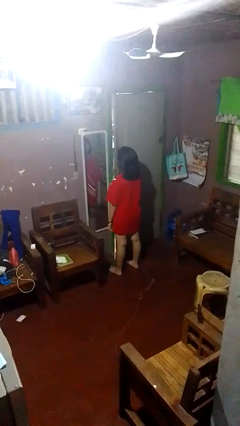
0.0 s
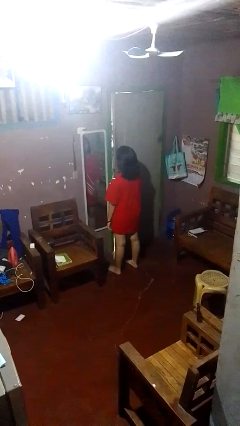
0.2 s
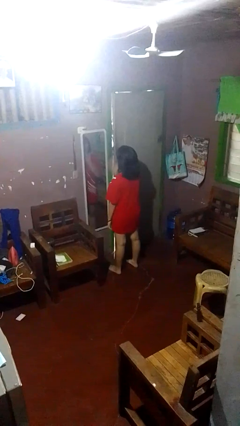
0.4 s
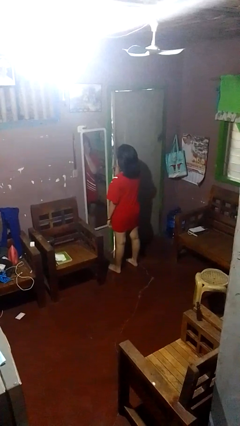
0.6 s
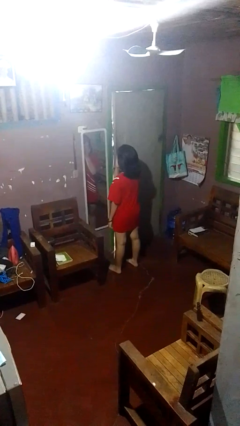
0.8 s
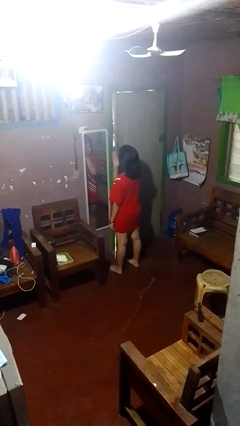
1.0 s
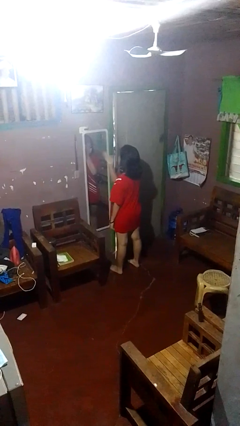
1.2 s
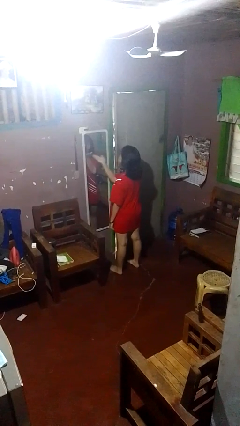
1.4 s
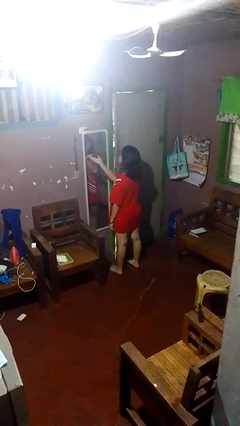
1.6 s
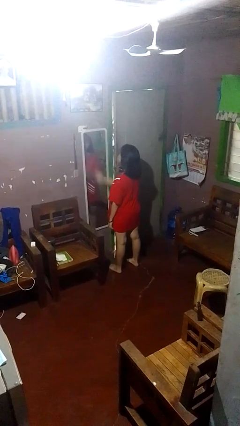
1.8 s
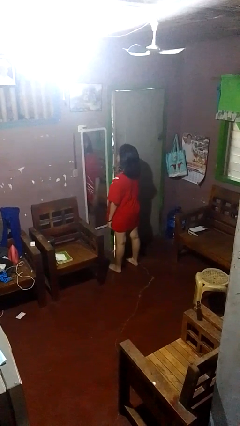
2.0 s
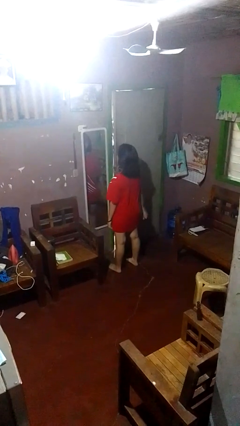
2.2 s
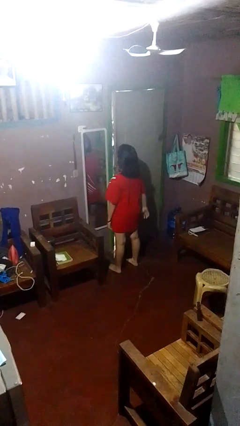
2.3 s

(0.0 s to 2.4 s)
person gestures blow kiss

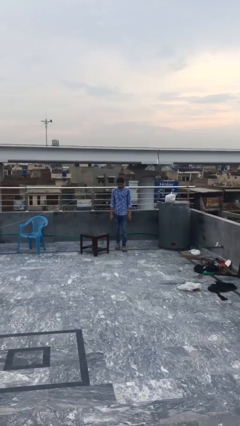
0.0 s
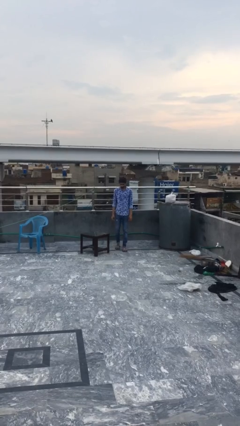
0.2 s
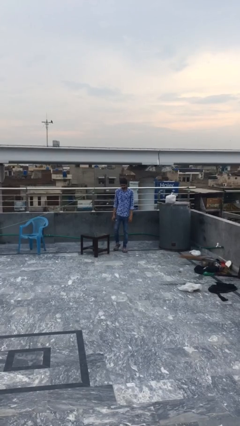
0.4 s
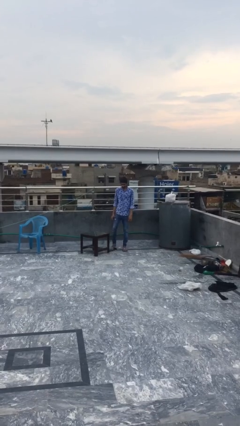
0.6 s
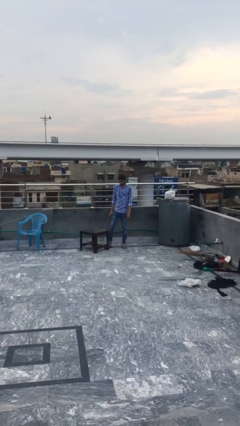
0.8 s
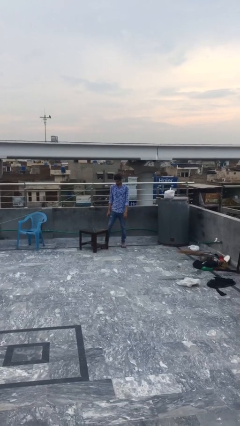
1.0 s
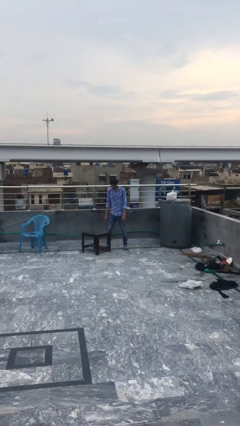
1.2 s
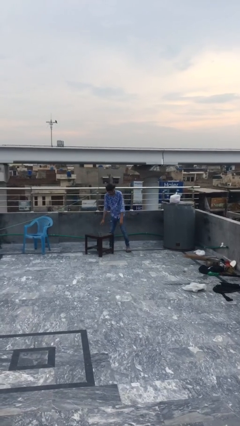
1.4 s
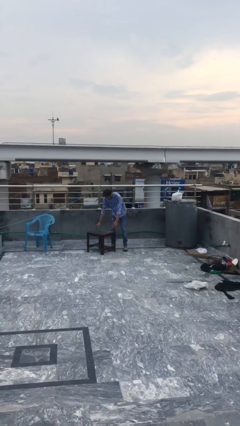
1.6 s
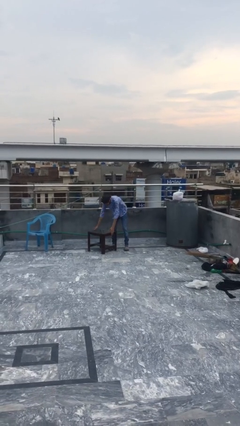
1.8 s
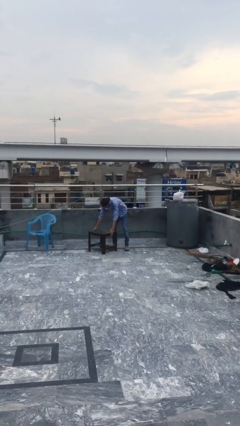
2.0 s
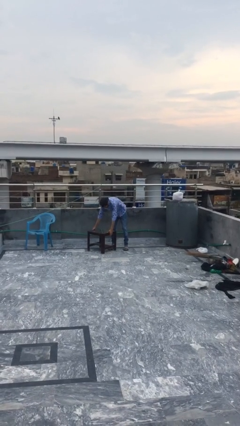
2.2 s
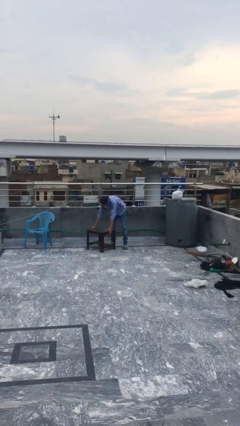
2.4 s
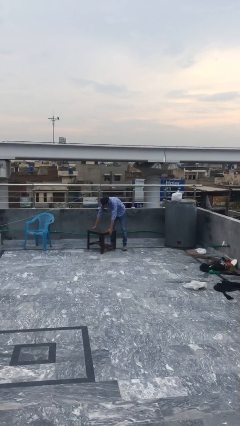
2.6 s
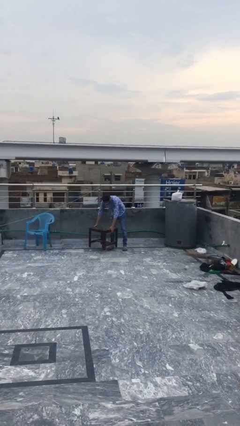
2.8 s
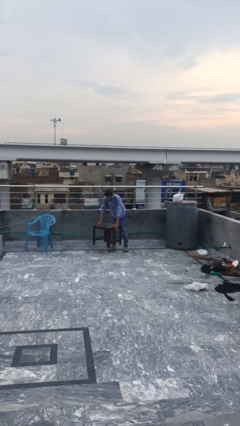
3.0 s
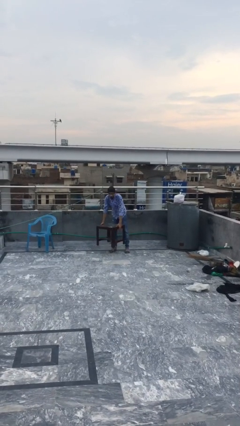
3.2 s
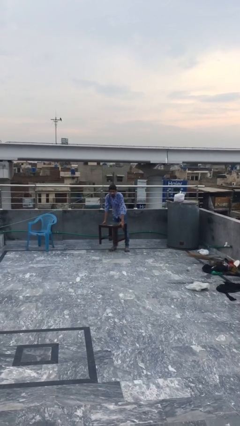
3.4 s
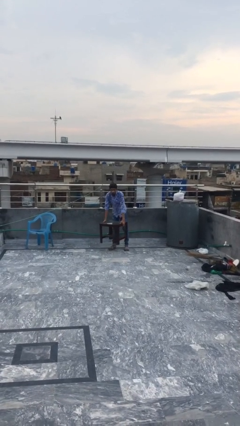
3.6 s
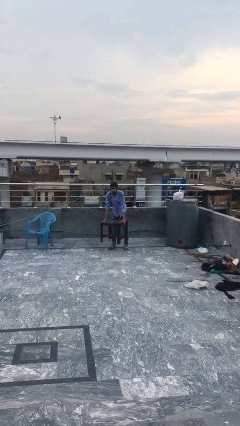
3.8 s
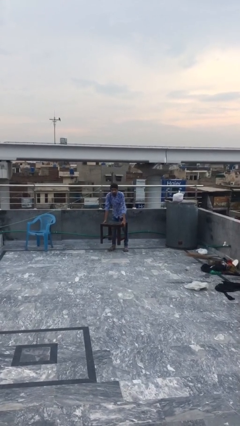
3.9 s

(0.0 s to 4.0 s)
person picks up object from floor

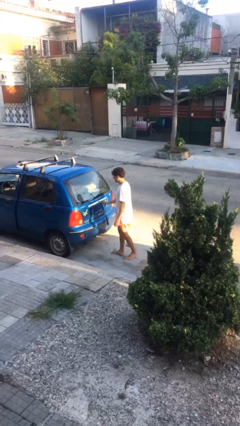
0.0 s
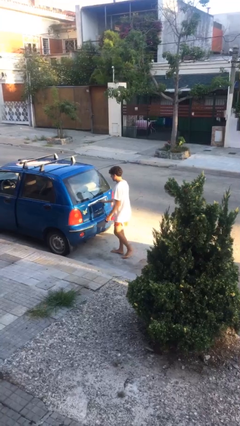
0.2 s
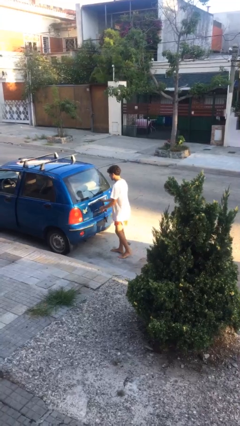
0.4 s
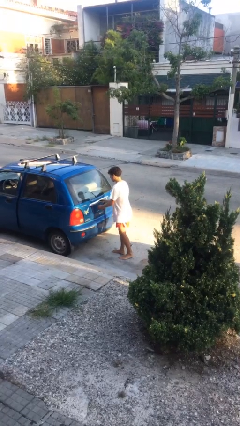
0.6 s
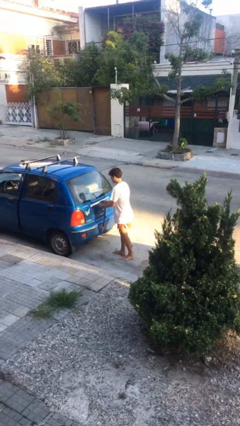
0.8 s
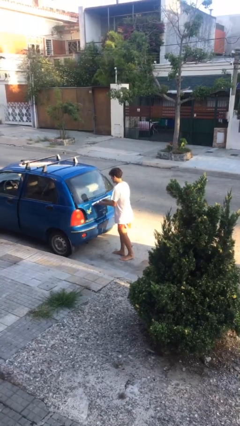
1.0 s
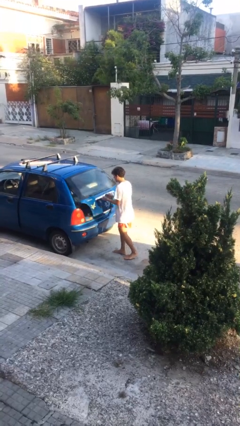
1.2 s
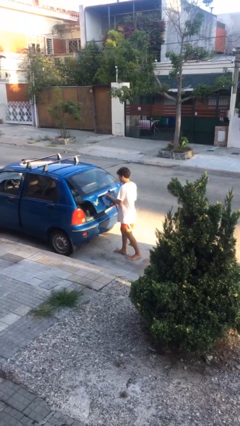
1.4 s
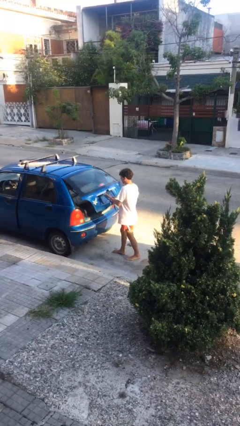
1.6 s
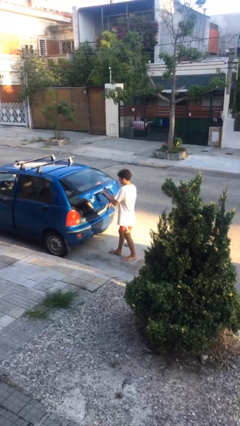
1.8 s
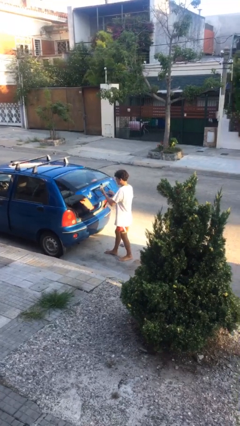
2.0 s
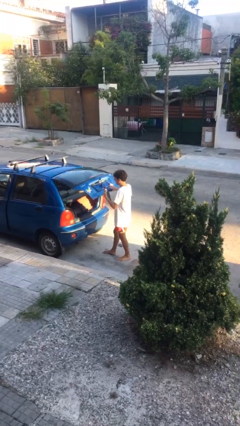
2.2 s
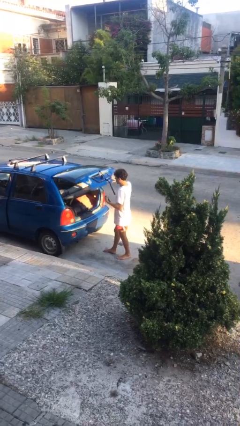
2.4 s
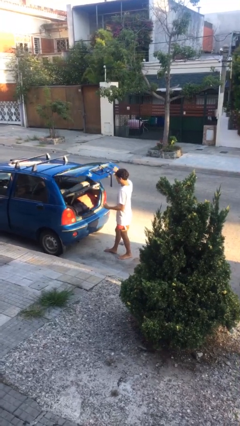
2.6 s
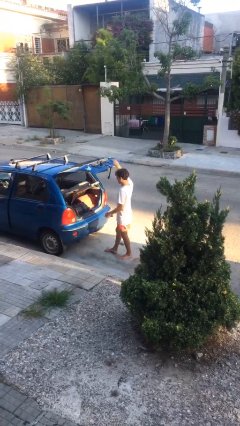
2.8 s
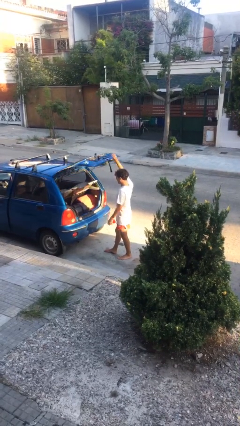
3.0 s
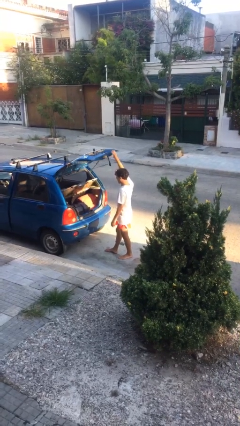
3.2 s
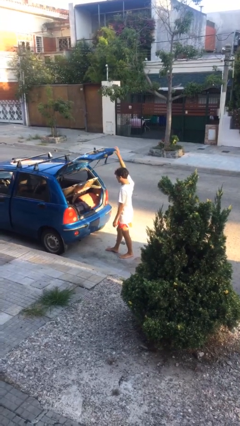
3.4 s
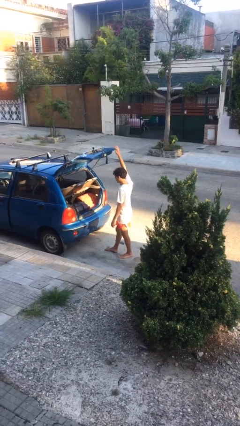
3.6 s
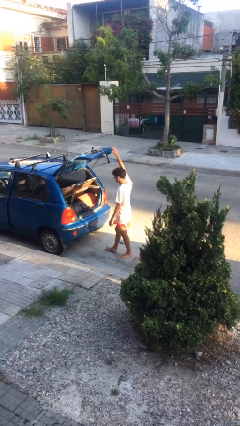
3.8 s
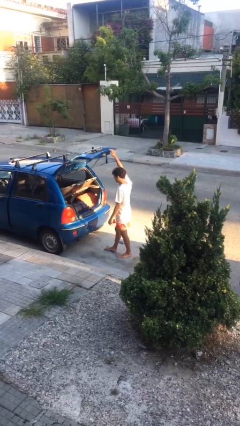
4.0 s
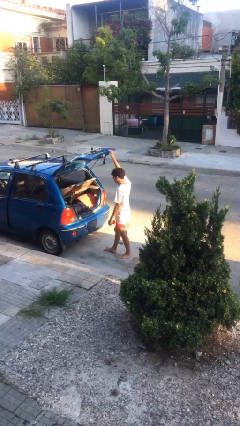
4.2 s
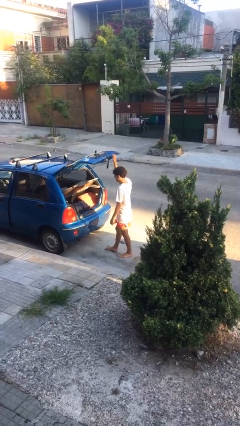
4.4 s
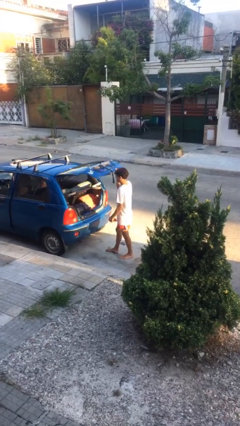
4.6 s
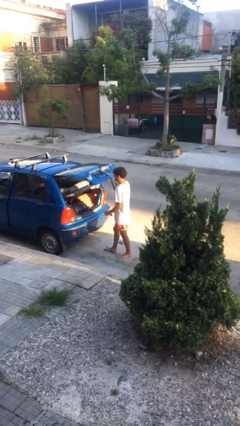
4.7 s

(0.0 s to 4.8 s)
person opens car trunk

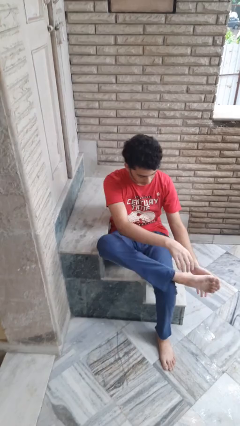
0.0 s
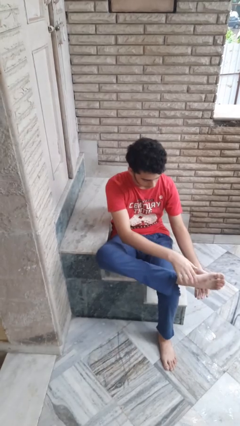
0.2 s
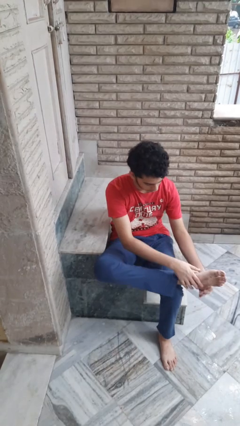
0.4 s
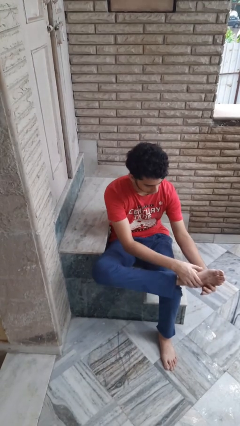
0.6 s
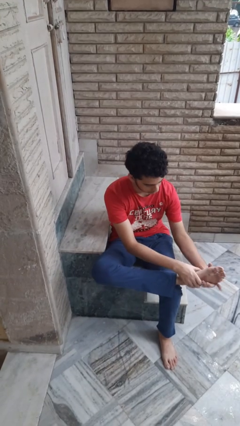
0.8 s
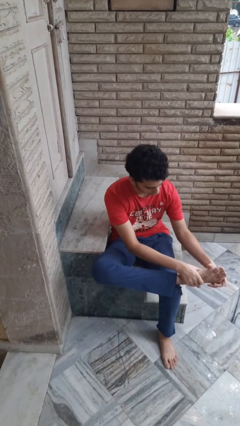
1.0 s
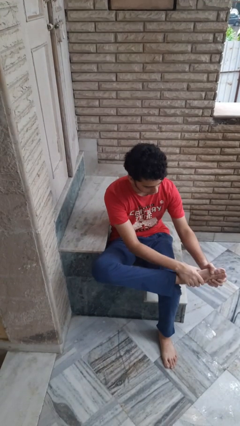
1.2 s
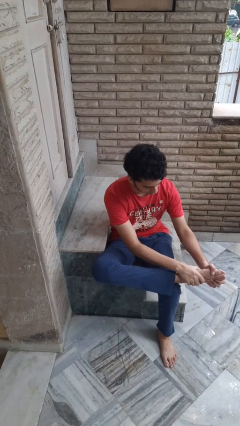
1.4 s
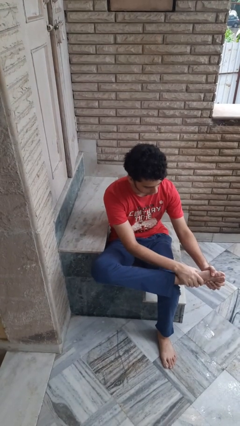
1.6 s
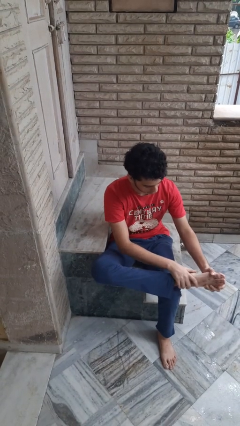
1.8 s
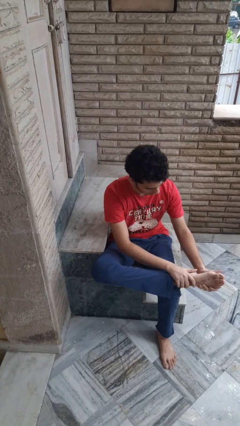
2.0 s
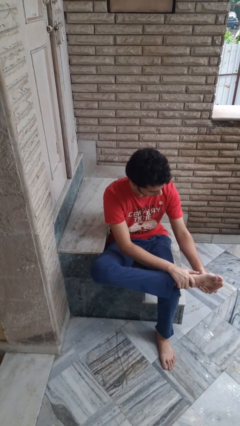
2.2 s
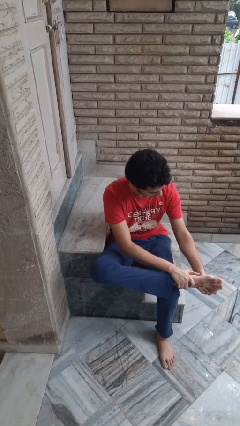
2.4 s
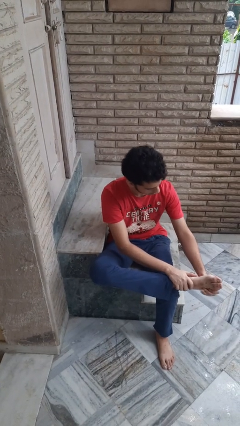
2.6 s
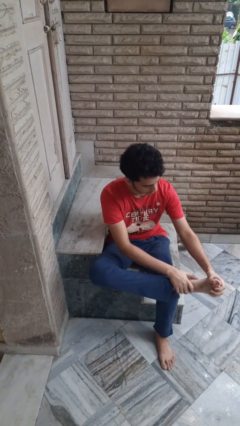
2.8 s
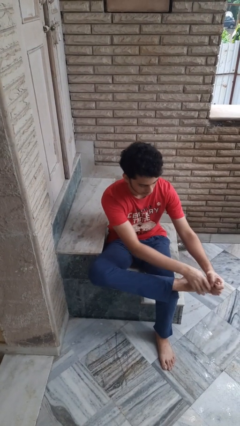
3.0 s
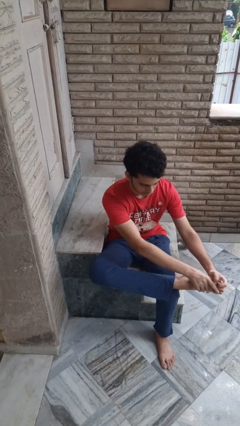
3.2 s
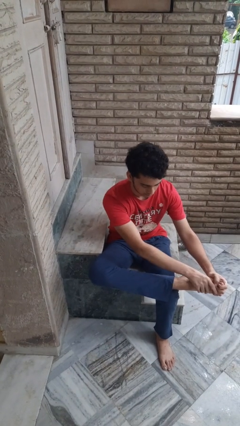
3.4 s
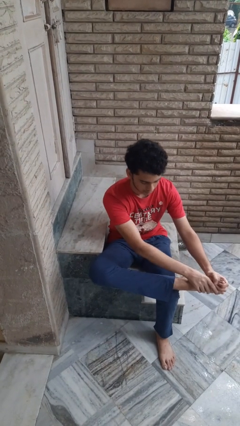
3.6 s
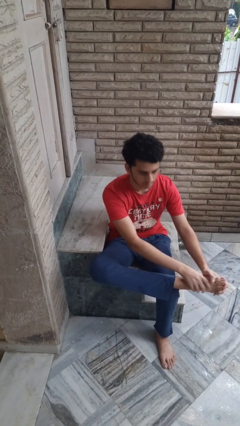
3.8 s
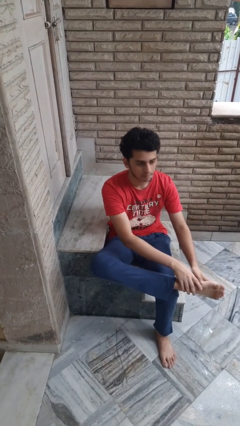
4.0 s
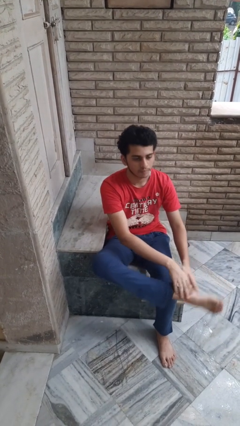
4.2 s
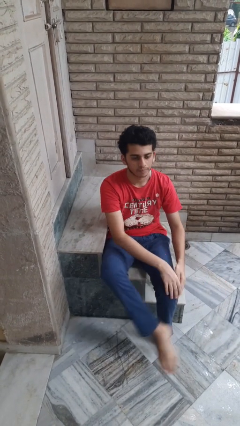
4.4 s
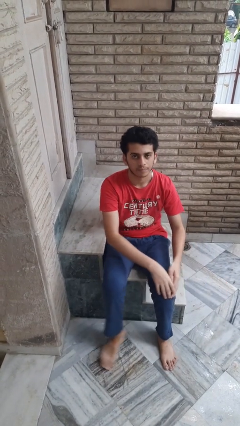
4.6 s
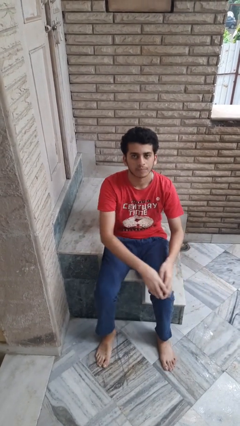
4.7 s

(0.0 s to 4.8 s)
person rubs foot

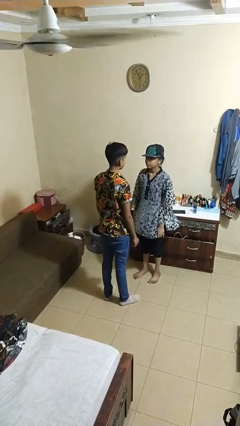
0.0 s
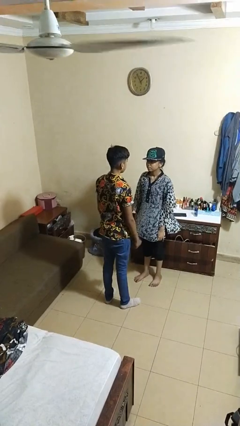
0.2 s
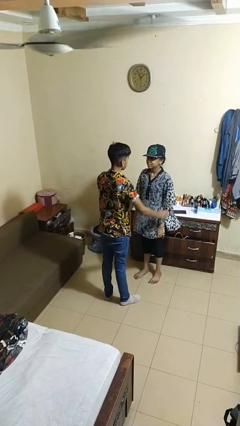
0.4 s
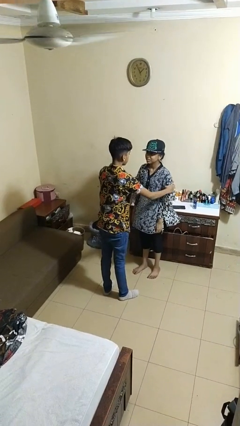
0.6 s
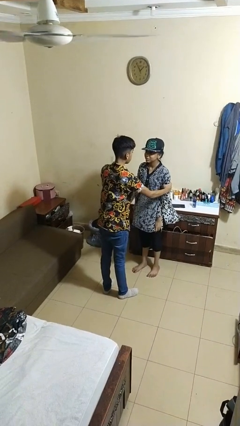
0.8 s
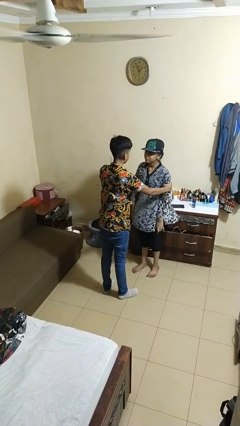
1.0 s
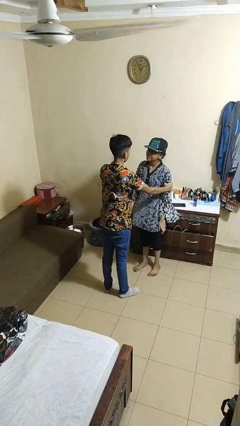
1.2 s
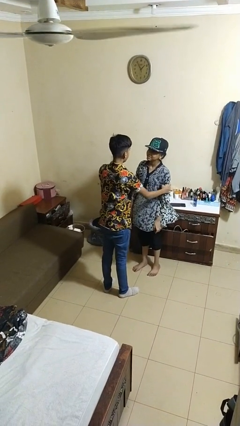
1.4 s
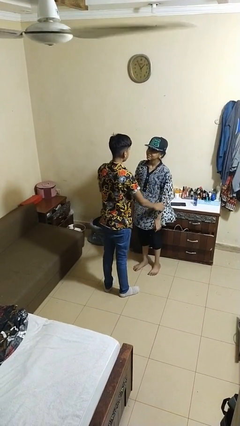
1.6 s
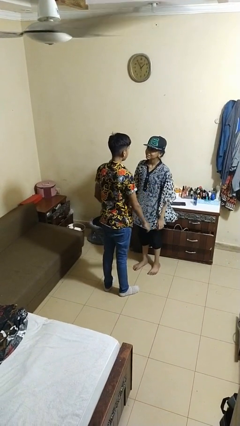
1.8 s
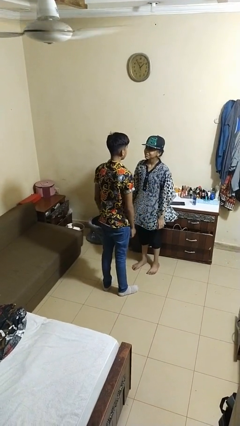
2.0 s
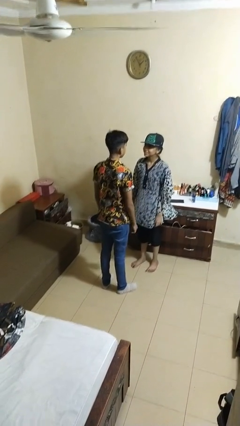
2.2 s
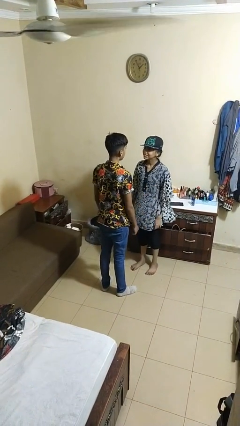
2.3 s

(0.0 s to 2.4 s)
person grabs person by bicep
